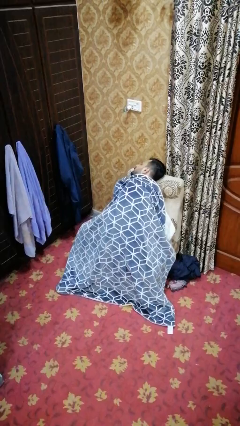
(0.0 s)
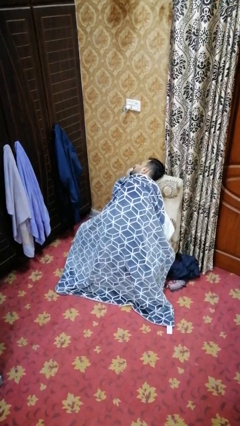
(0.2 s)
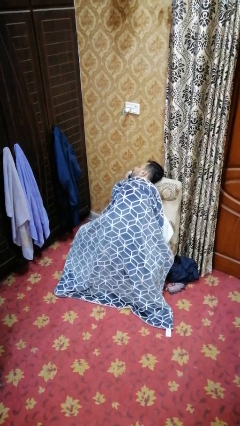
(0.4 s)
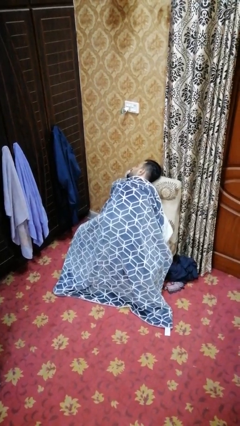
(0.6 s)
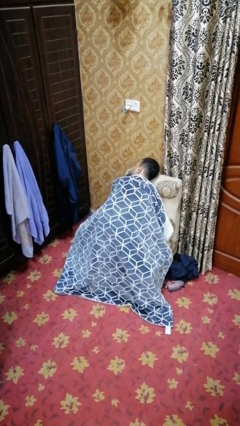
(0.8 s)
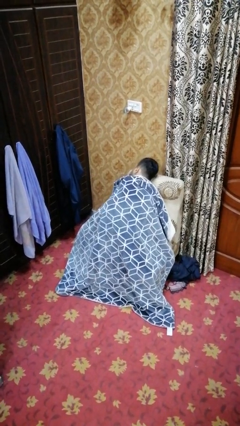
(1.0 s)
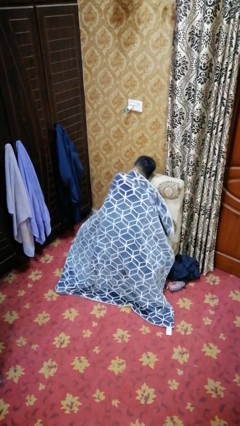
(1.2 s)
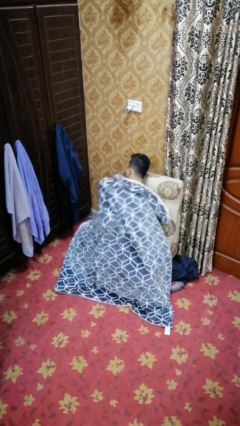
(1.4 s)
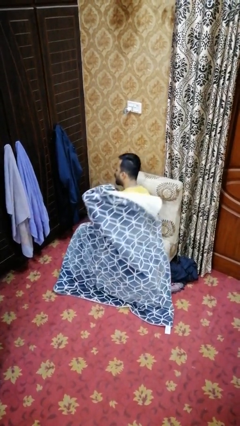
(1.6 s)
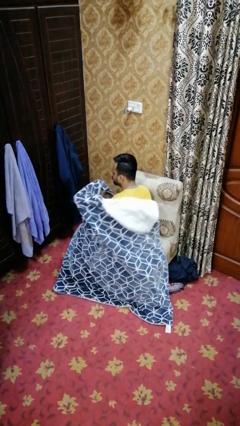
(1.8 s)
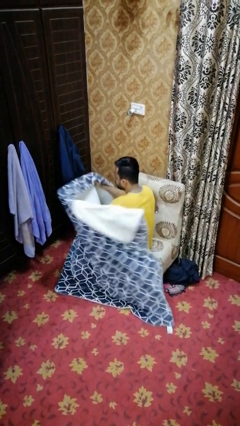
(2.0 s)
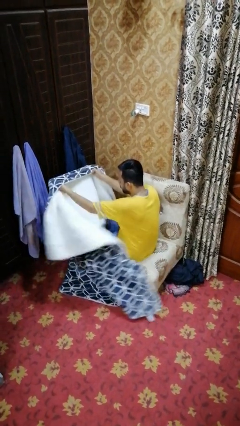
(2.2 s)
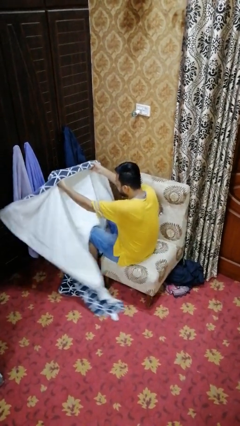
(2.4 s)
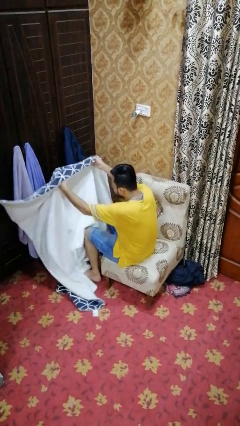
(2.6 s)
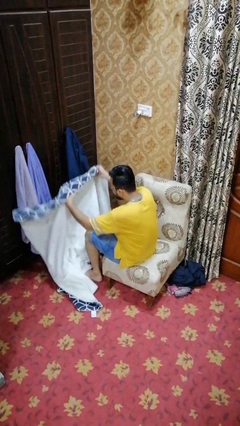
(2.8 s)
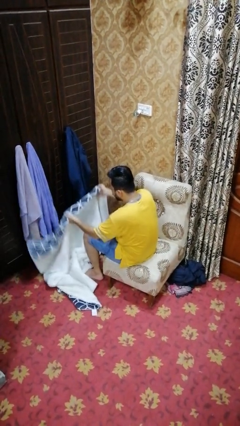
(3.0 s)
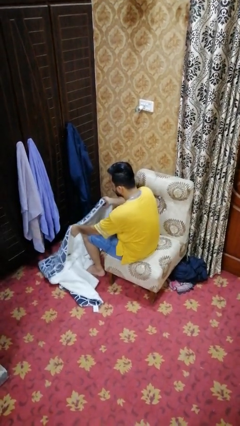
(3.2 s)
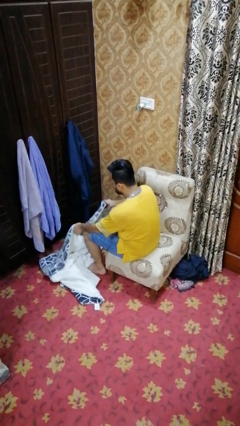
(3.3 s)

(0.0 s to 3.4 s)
person uncovers with blanket

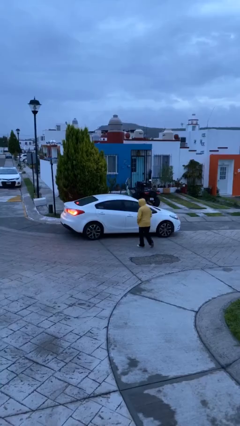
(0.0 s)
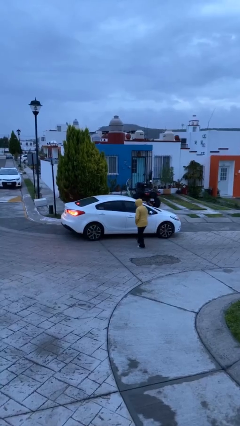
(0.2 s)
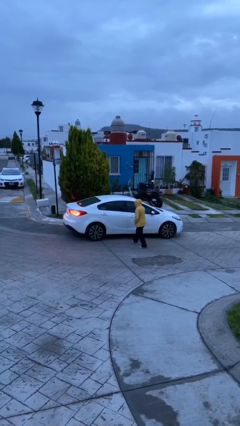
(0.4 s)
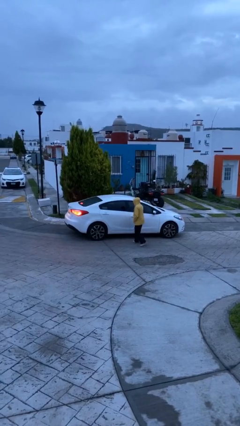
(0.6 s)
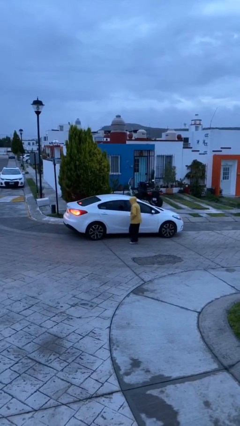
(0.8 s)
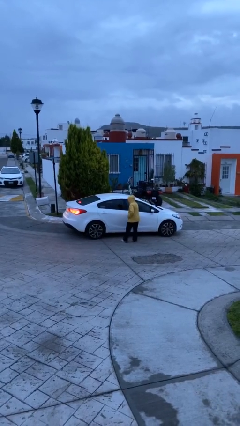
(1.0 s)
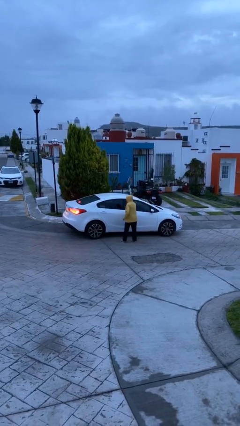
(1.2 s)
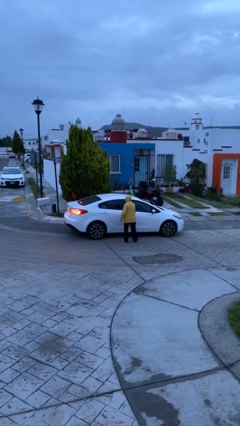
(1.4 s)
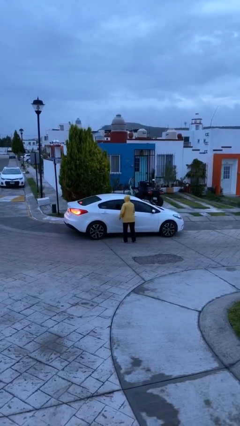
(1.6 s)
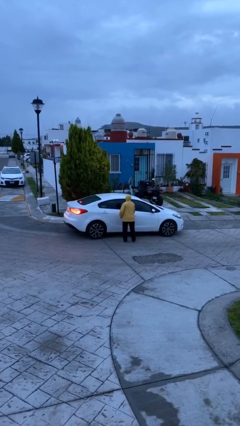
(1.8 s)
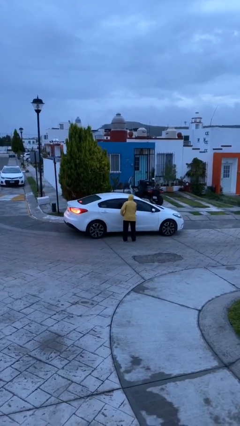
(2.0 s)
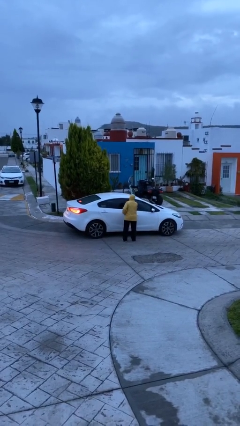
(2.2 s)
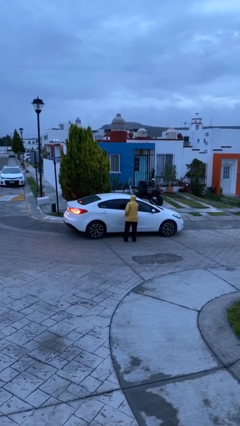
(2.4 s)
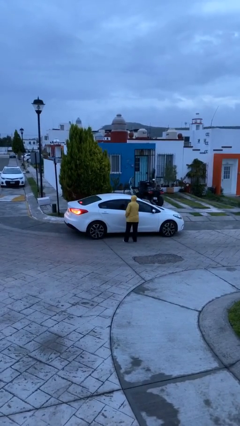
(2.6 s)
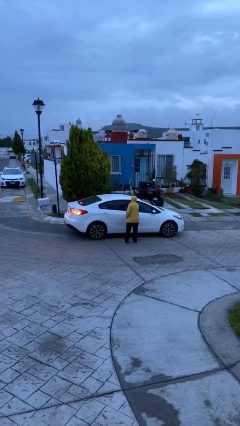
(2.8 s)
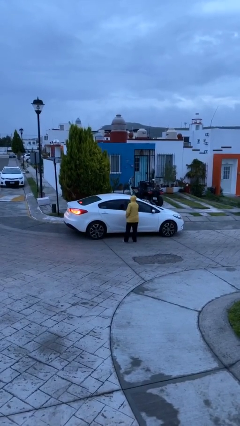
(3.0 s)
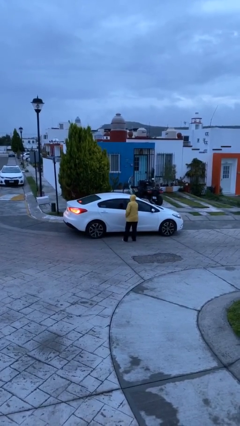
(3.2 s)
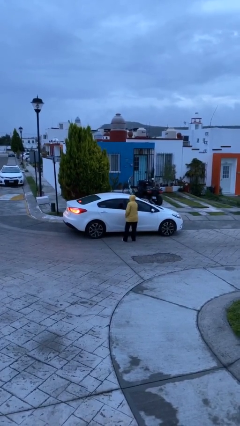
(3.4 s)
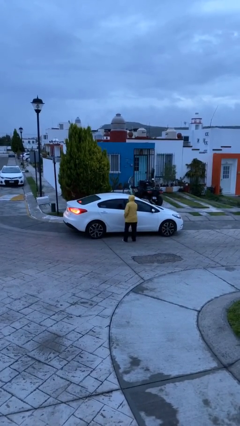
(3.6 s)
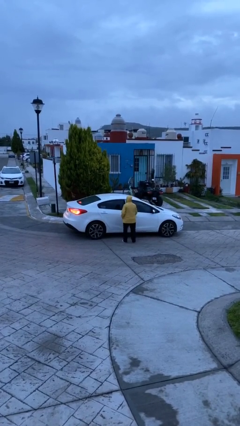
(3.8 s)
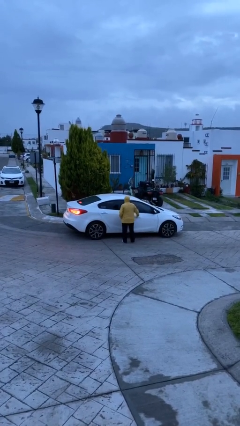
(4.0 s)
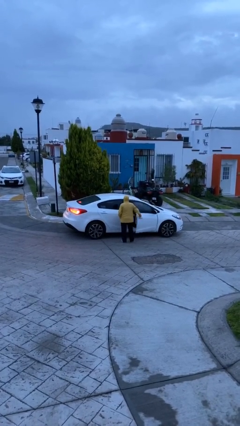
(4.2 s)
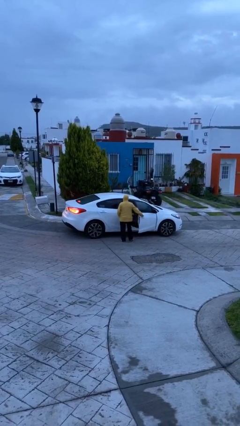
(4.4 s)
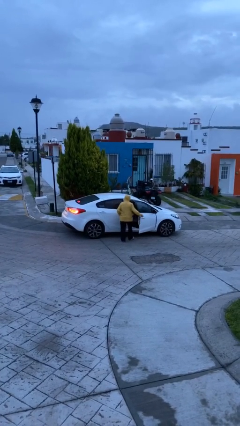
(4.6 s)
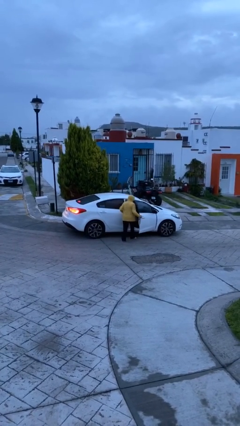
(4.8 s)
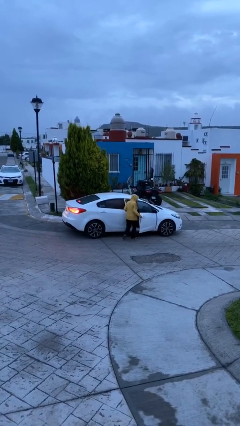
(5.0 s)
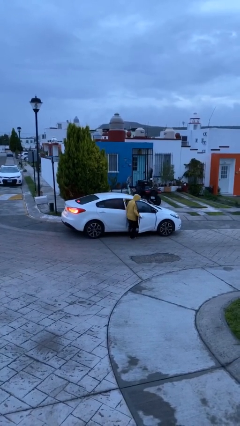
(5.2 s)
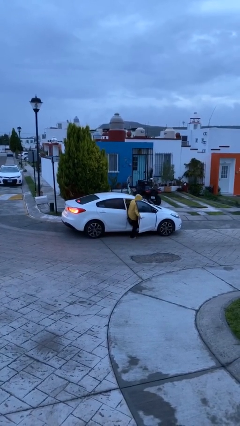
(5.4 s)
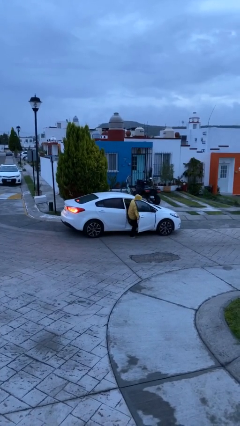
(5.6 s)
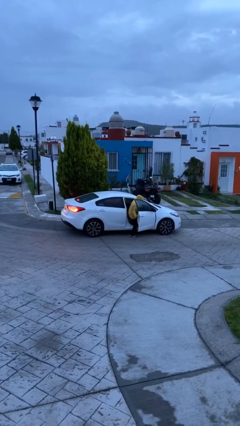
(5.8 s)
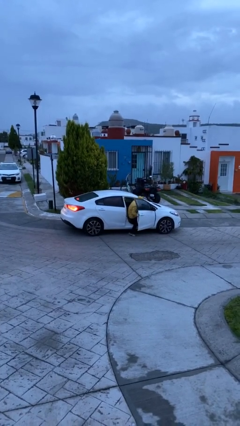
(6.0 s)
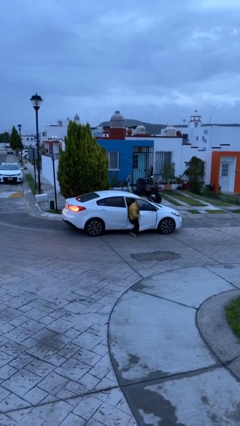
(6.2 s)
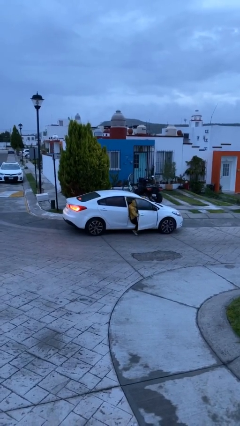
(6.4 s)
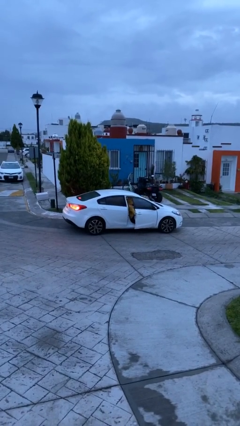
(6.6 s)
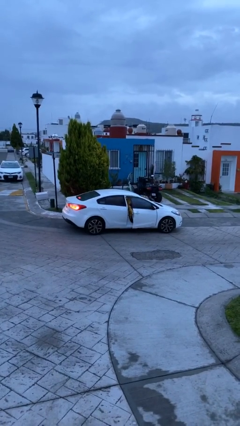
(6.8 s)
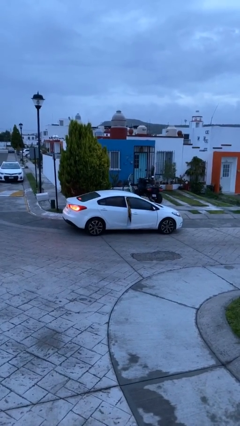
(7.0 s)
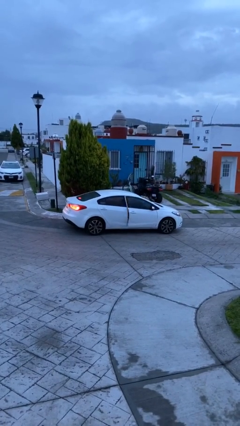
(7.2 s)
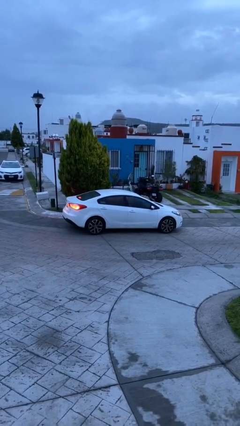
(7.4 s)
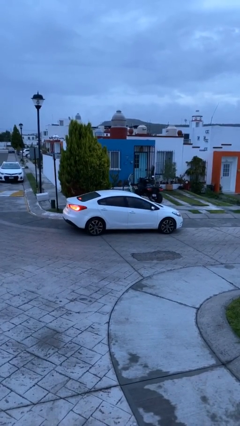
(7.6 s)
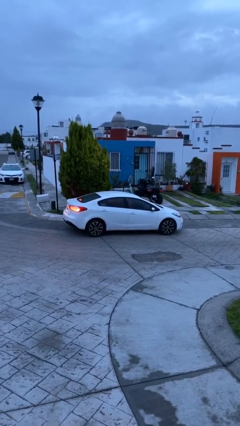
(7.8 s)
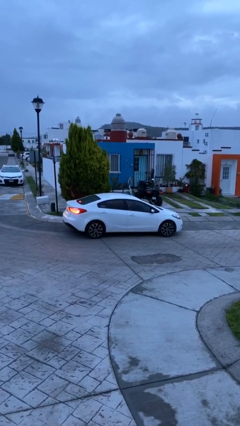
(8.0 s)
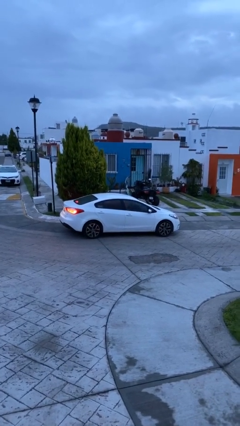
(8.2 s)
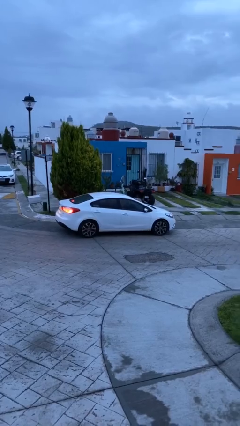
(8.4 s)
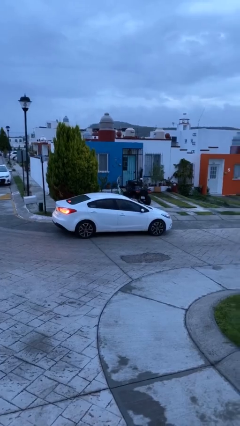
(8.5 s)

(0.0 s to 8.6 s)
car picks up person

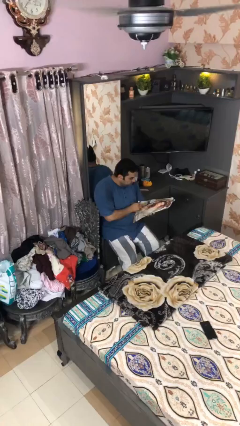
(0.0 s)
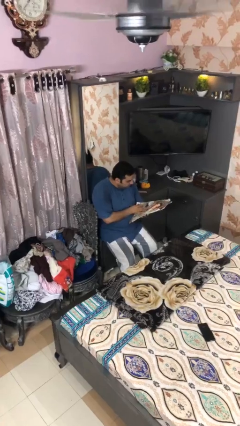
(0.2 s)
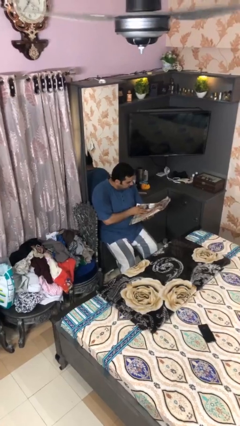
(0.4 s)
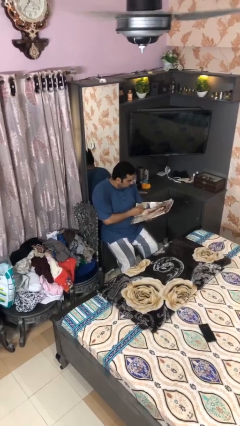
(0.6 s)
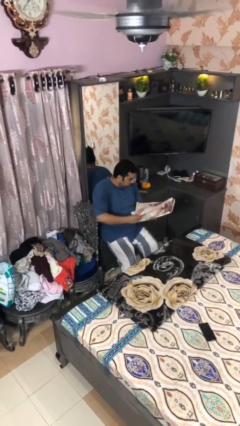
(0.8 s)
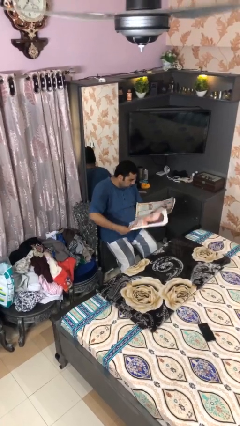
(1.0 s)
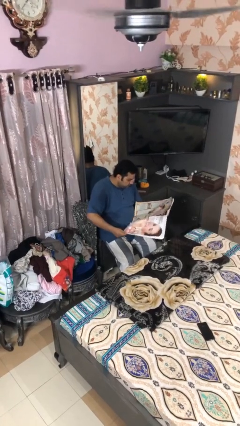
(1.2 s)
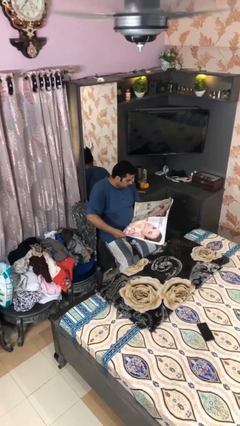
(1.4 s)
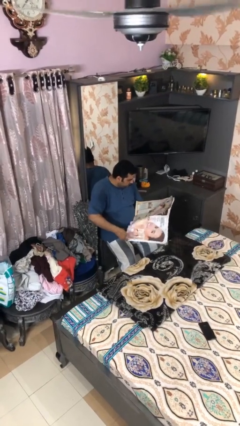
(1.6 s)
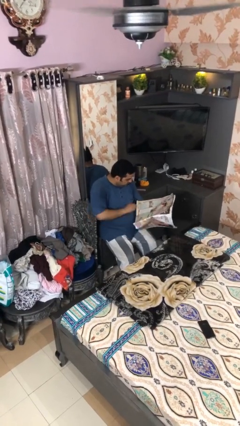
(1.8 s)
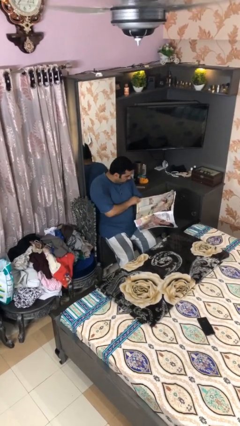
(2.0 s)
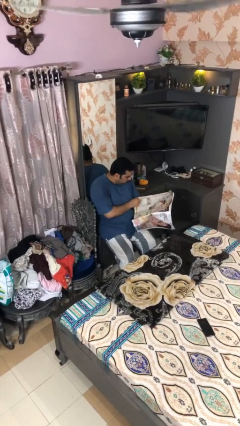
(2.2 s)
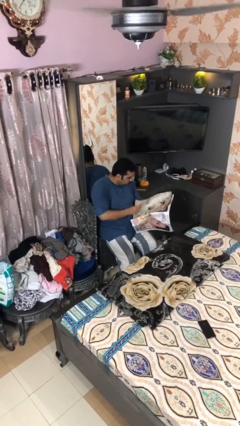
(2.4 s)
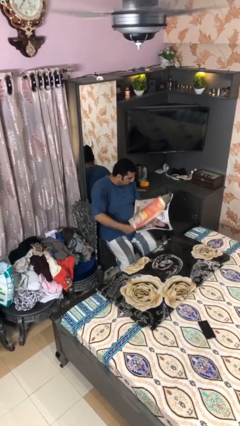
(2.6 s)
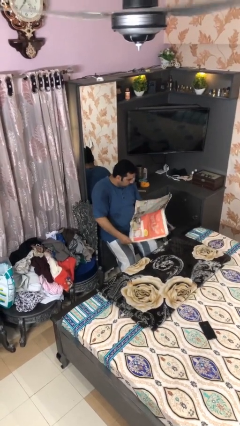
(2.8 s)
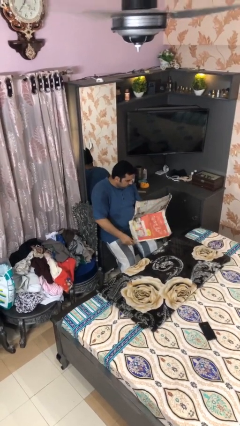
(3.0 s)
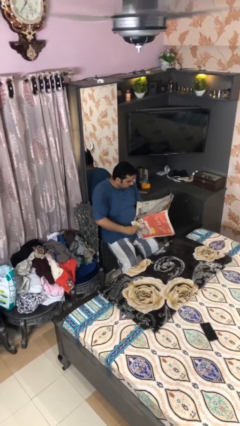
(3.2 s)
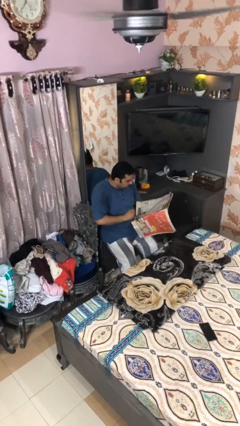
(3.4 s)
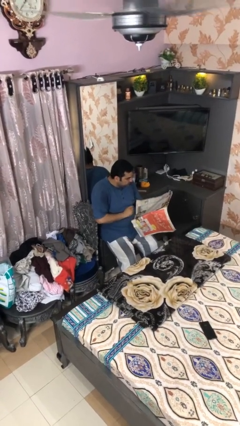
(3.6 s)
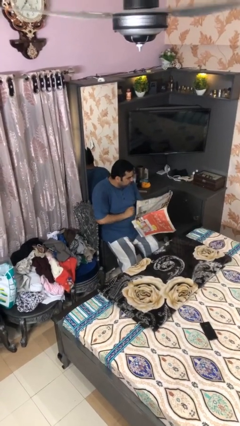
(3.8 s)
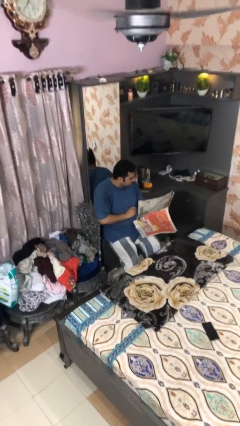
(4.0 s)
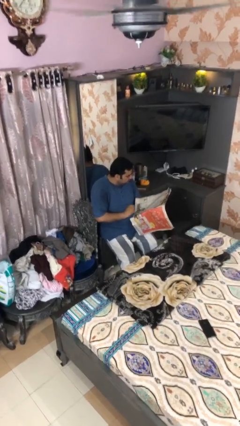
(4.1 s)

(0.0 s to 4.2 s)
person reads magazine

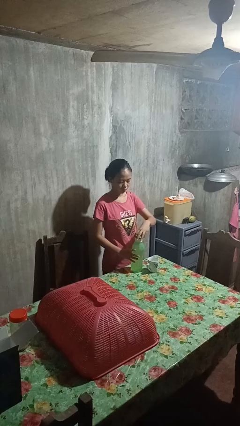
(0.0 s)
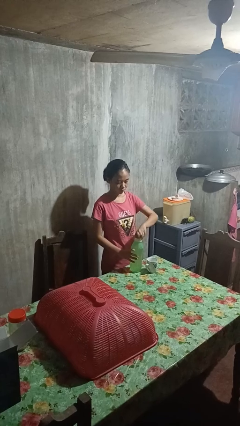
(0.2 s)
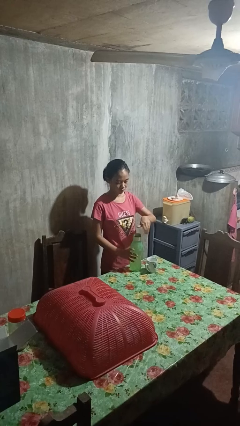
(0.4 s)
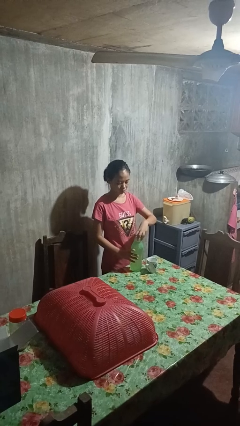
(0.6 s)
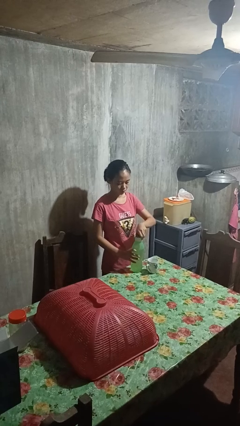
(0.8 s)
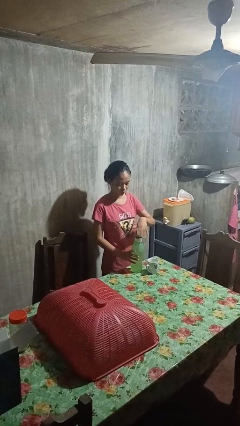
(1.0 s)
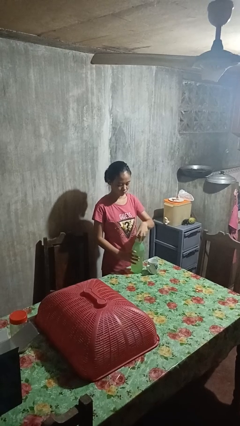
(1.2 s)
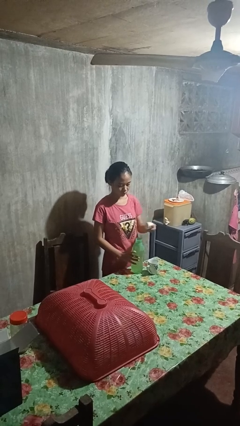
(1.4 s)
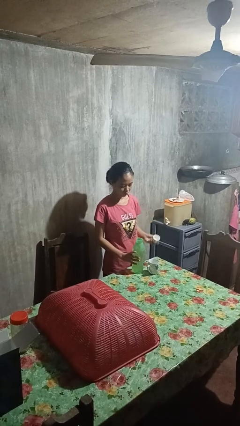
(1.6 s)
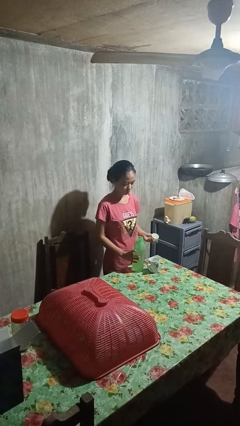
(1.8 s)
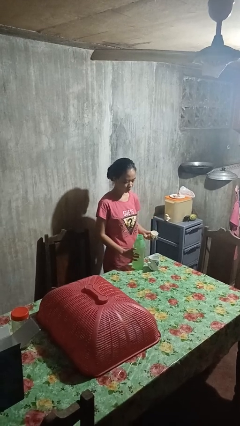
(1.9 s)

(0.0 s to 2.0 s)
person unscrews lid from bottle
